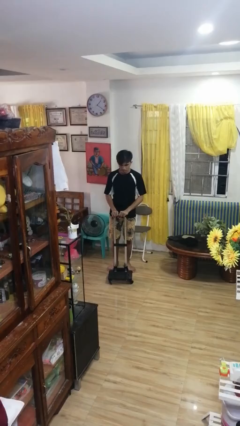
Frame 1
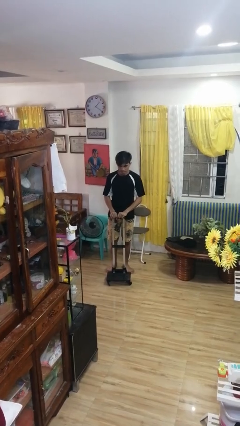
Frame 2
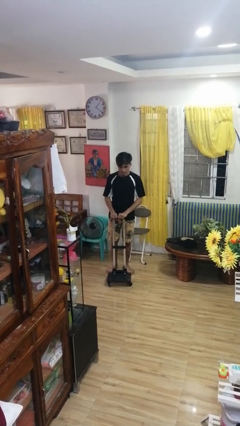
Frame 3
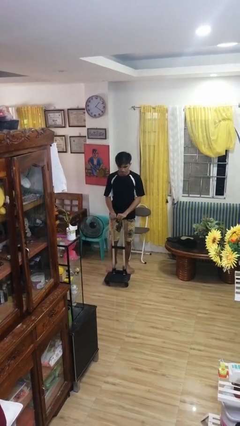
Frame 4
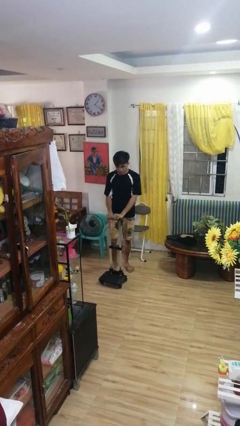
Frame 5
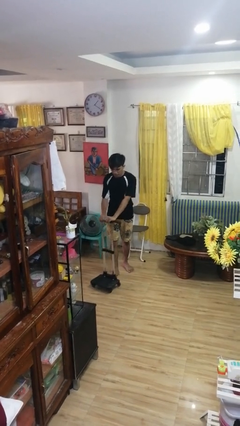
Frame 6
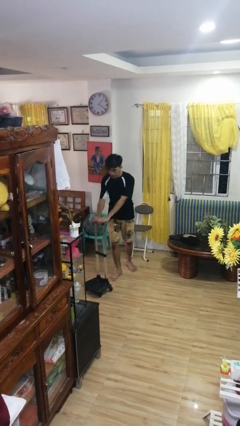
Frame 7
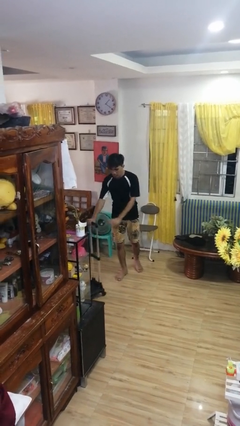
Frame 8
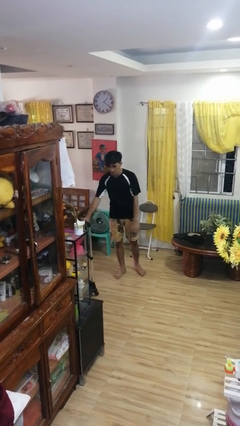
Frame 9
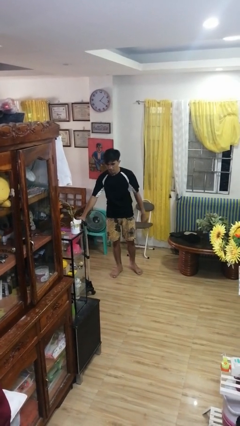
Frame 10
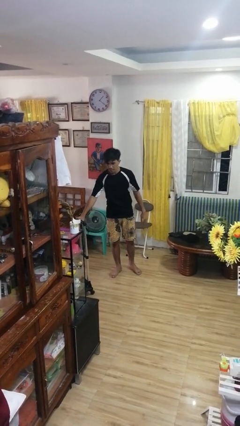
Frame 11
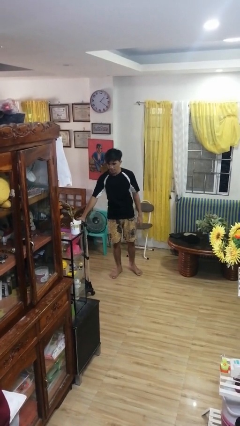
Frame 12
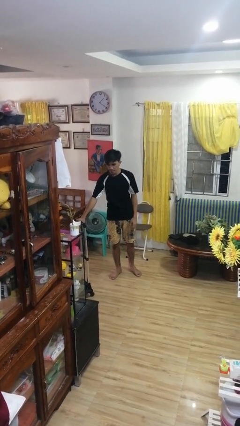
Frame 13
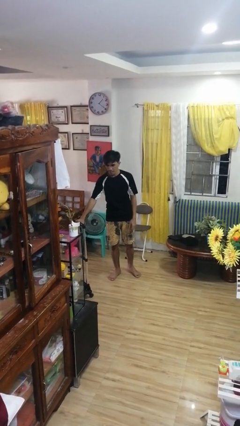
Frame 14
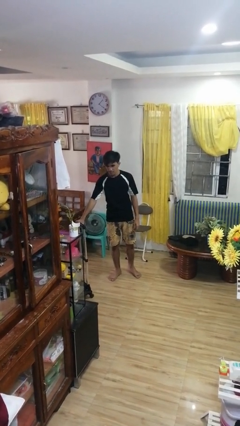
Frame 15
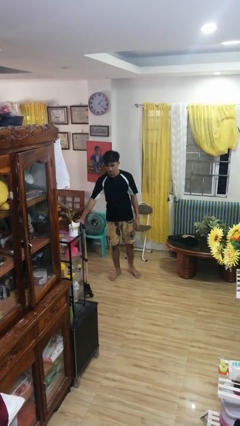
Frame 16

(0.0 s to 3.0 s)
person pushes wheeled cart

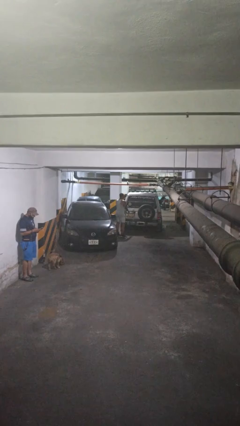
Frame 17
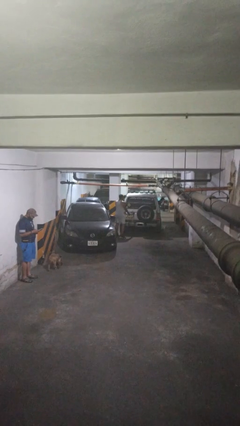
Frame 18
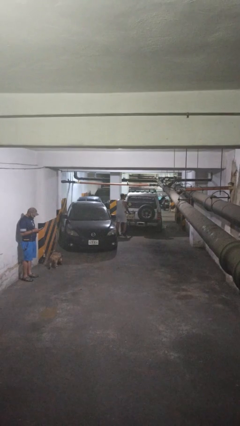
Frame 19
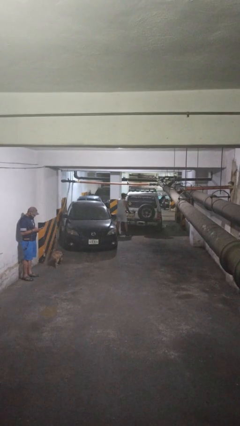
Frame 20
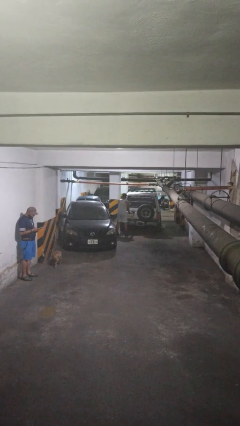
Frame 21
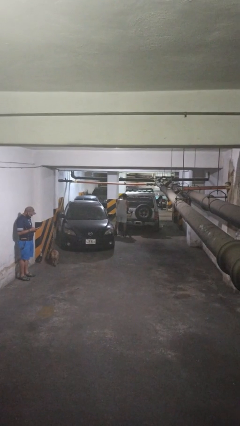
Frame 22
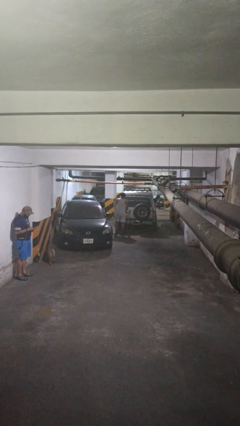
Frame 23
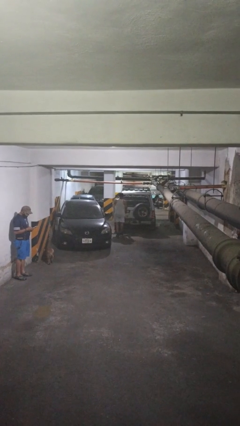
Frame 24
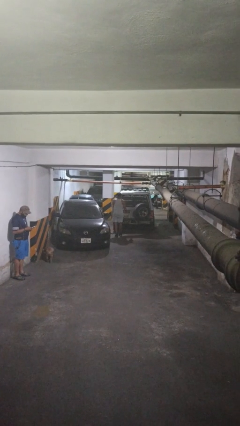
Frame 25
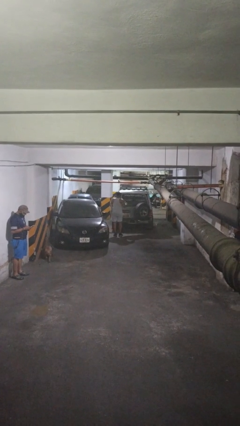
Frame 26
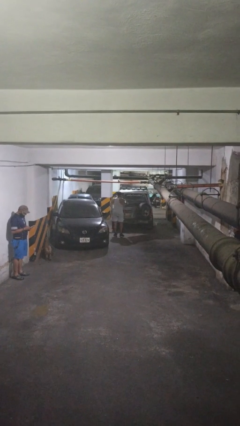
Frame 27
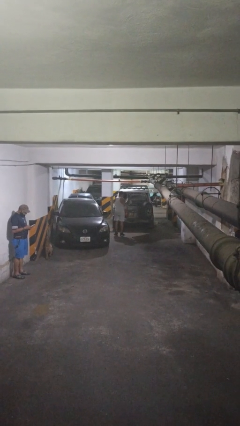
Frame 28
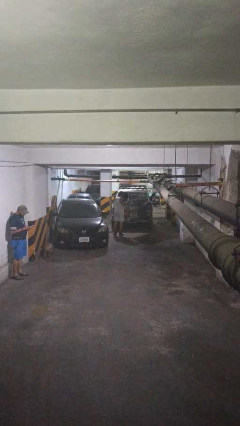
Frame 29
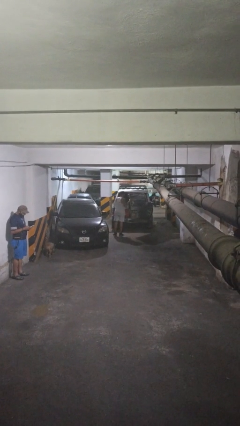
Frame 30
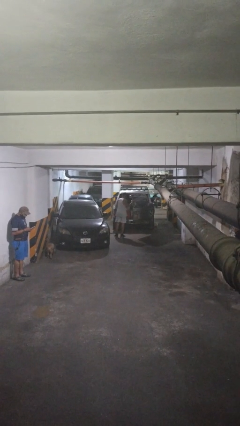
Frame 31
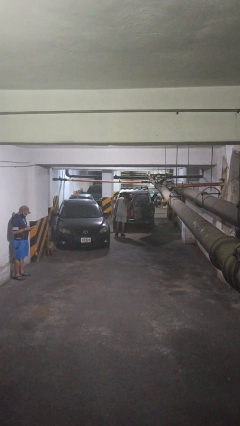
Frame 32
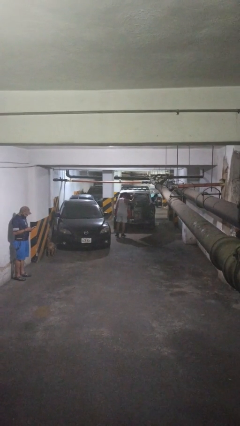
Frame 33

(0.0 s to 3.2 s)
person opens car trunk

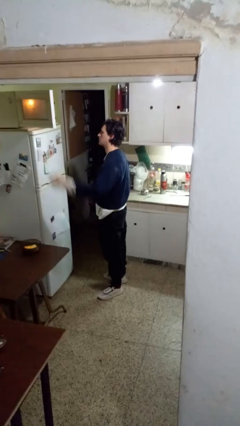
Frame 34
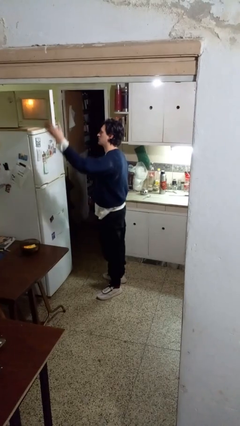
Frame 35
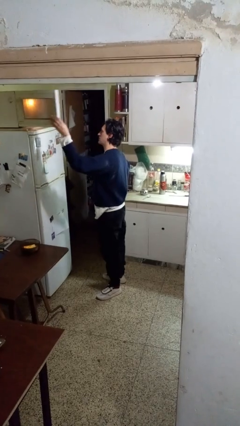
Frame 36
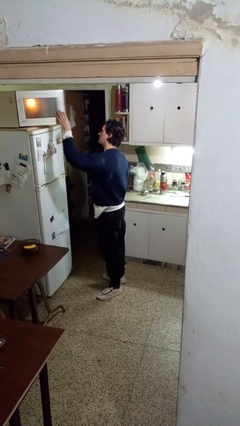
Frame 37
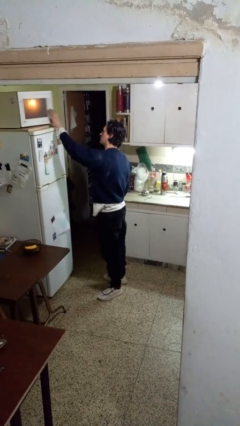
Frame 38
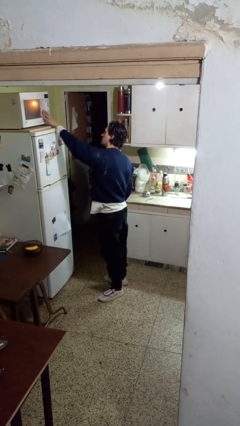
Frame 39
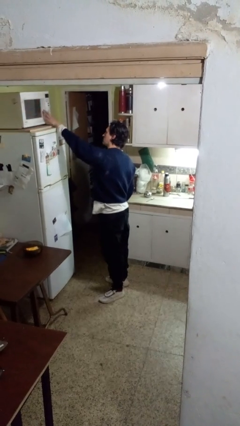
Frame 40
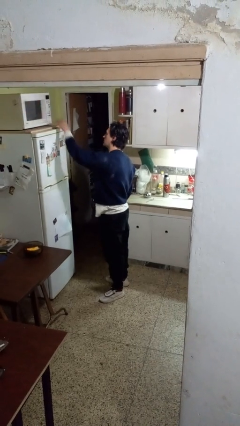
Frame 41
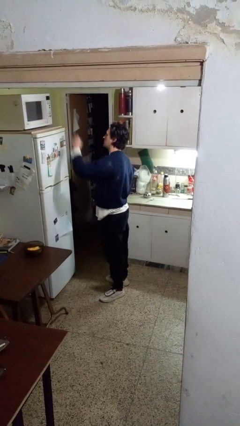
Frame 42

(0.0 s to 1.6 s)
person closes microwave

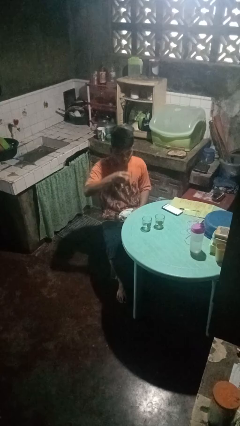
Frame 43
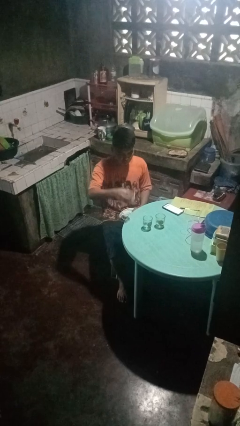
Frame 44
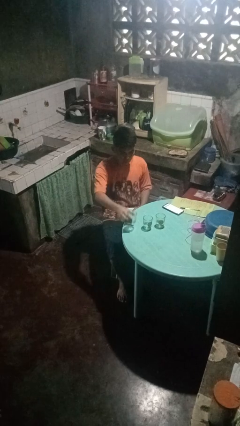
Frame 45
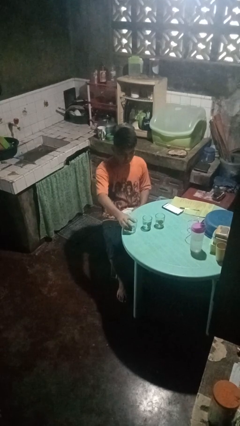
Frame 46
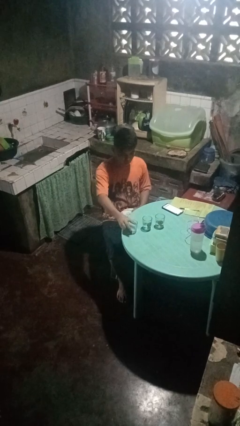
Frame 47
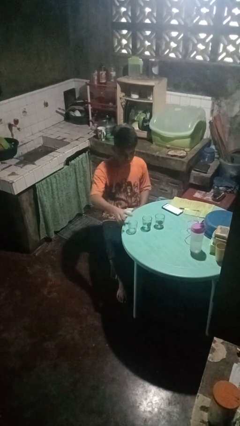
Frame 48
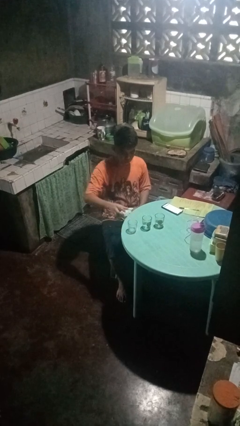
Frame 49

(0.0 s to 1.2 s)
person puts down object on table

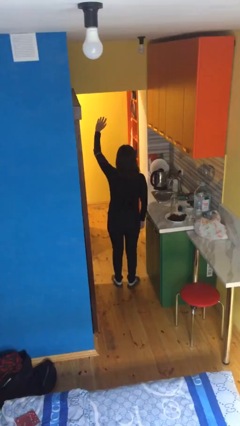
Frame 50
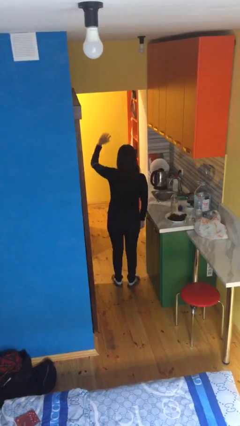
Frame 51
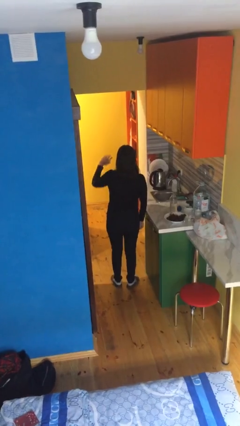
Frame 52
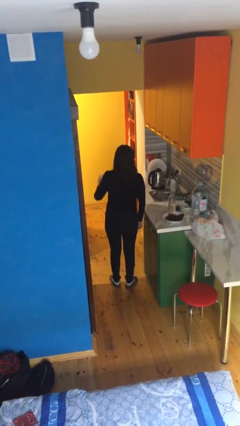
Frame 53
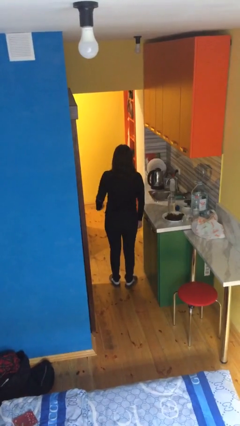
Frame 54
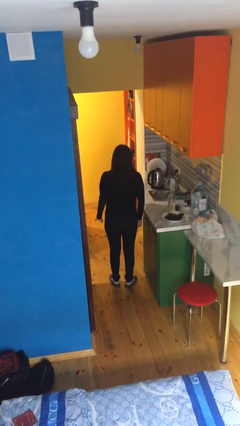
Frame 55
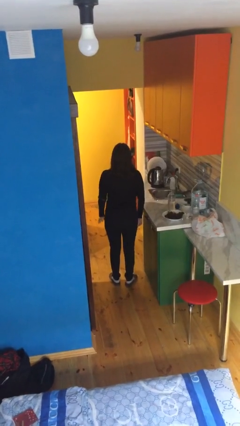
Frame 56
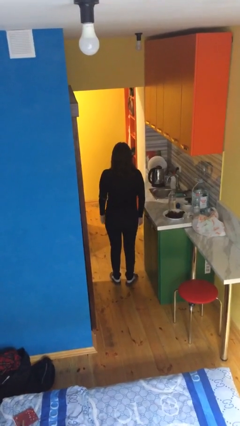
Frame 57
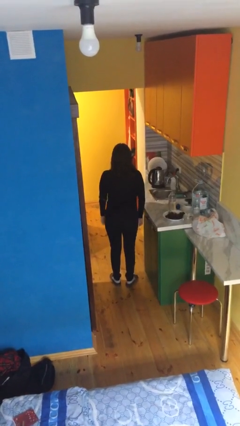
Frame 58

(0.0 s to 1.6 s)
person gestures swipe down

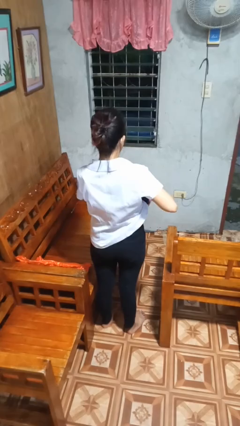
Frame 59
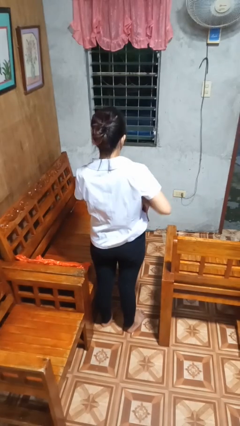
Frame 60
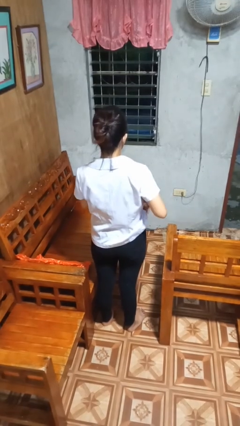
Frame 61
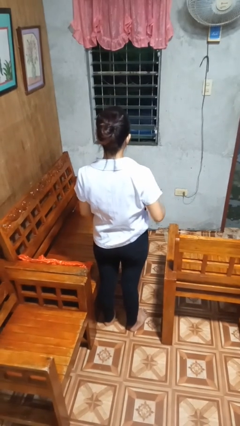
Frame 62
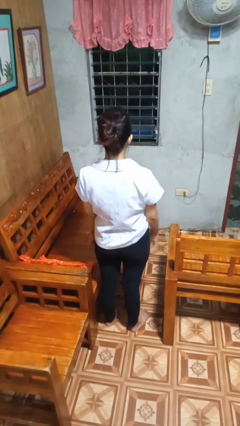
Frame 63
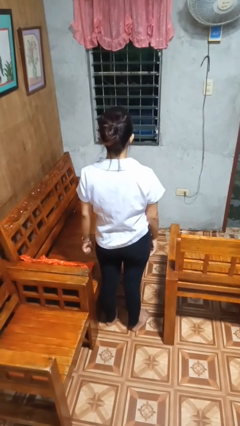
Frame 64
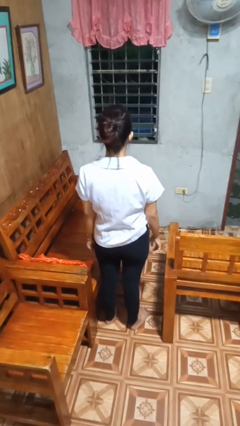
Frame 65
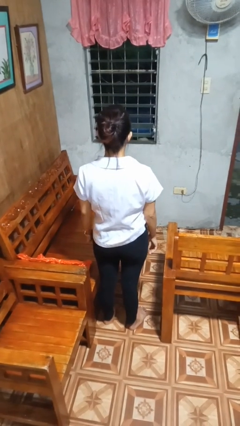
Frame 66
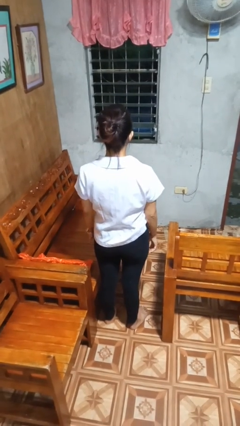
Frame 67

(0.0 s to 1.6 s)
person puts phone into pocket

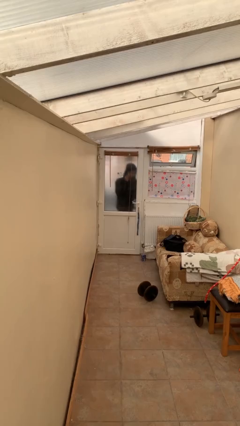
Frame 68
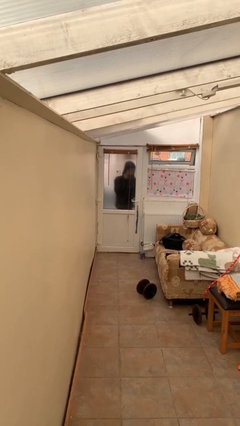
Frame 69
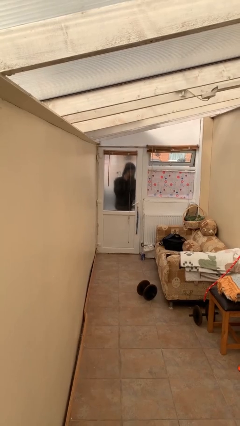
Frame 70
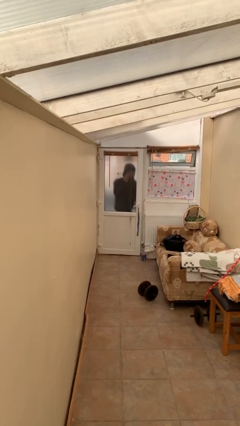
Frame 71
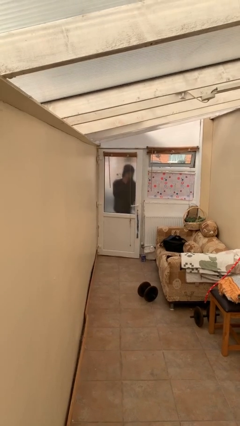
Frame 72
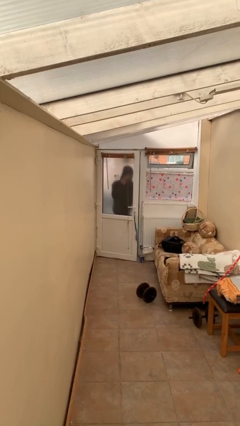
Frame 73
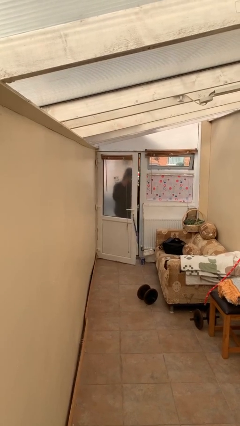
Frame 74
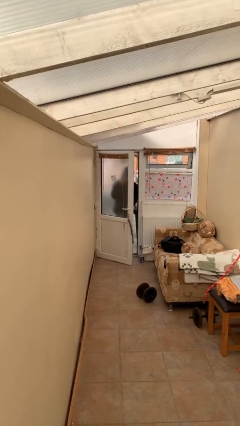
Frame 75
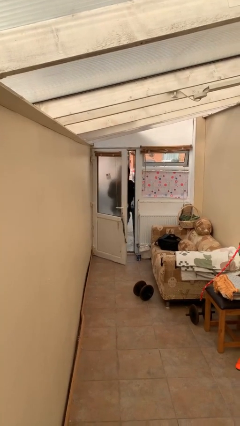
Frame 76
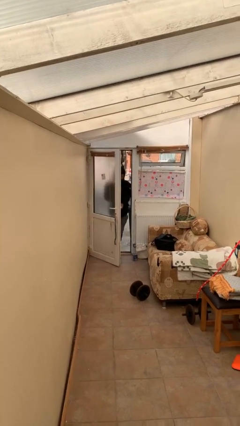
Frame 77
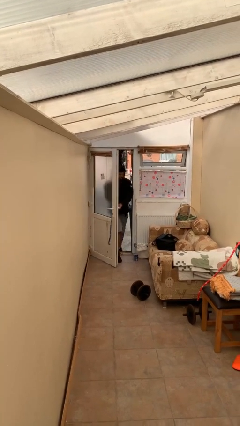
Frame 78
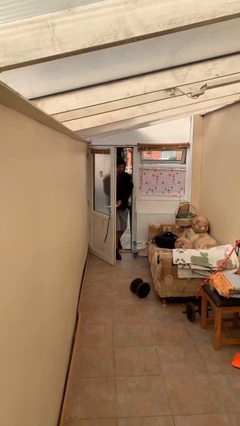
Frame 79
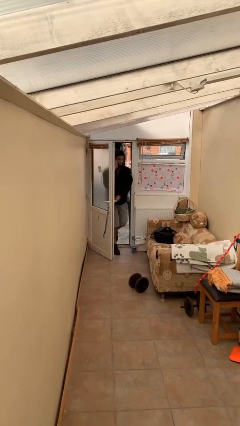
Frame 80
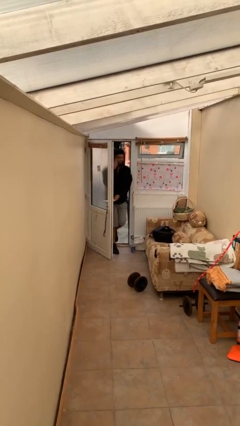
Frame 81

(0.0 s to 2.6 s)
person opens facility door

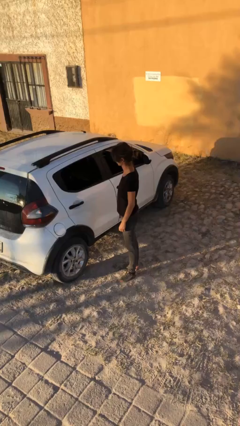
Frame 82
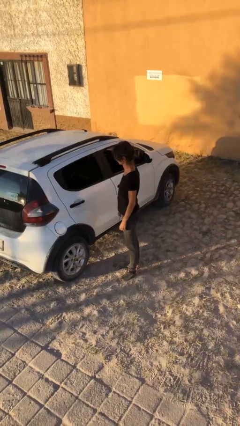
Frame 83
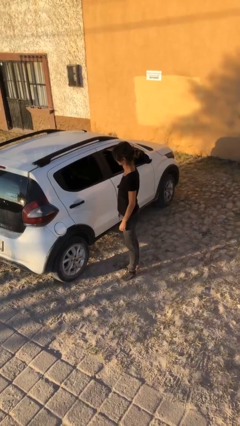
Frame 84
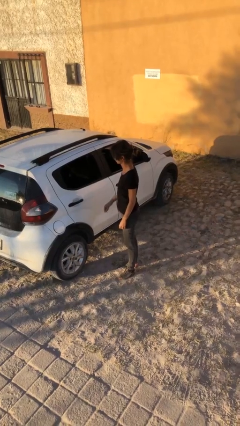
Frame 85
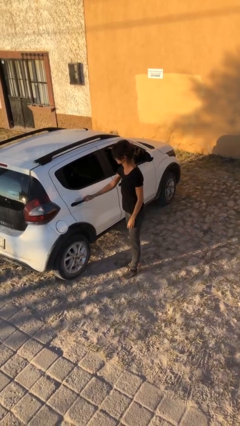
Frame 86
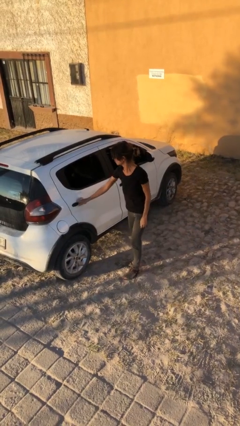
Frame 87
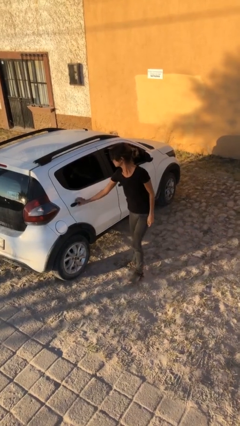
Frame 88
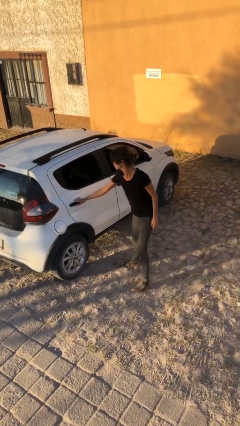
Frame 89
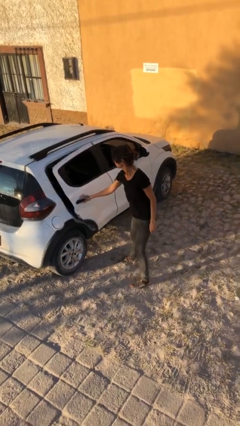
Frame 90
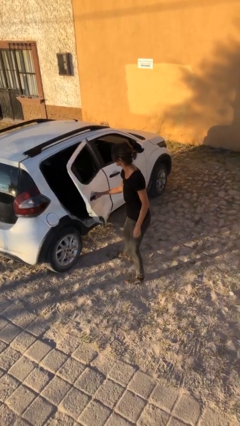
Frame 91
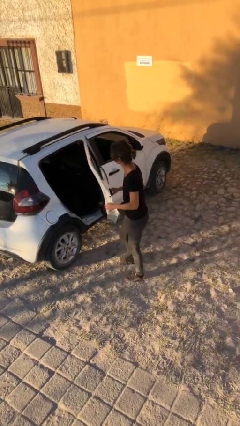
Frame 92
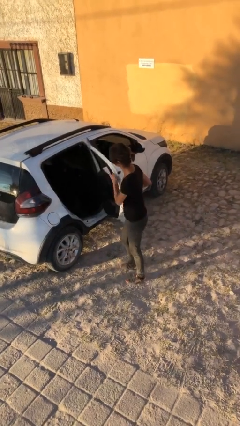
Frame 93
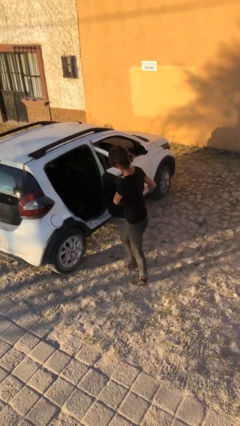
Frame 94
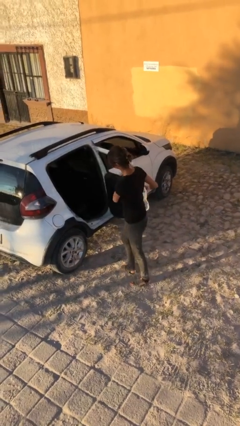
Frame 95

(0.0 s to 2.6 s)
person opens car door
